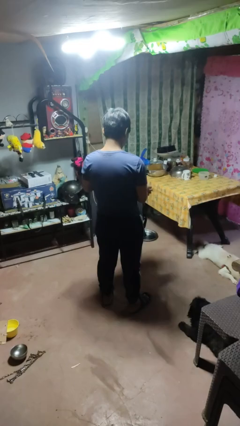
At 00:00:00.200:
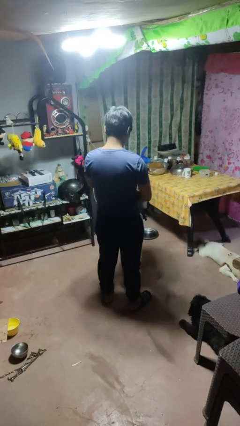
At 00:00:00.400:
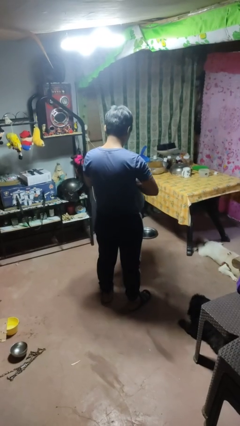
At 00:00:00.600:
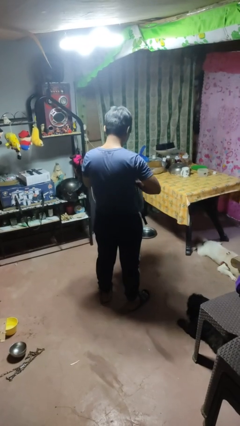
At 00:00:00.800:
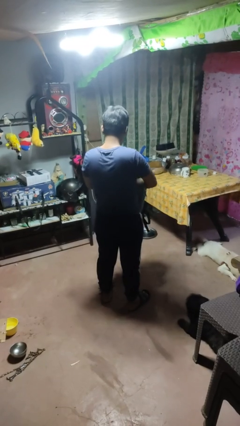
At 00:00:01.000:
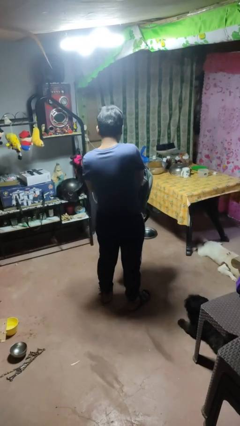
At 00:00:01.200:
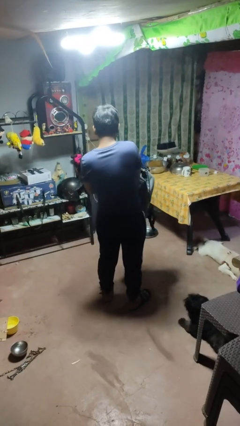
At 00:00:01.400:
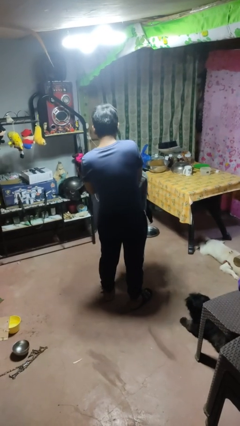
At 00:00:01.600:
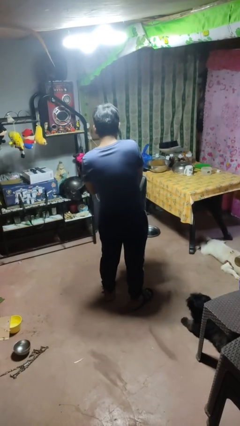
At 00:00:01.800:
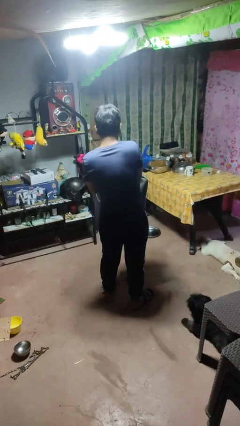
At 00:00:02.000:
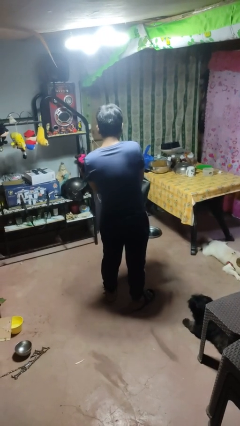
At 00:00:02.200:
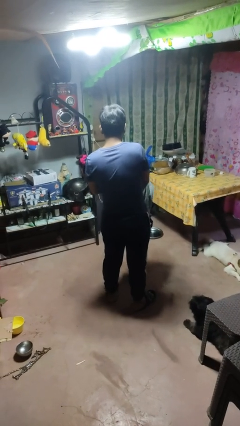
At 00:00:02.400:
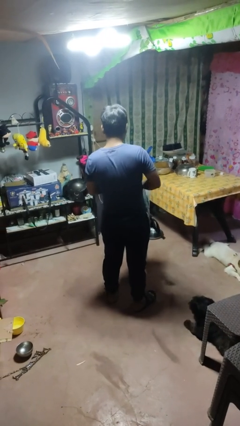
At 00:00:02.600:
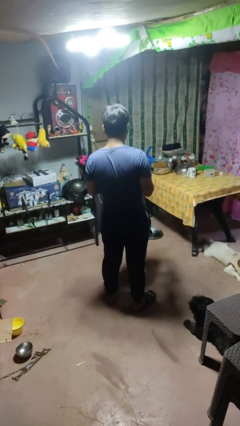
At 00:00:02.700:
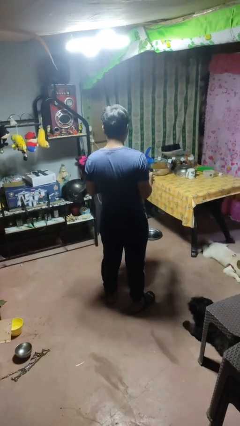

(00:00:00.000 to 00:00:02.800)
person searches in bag

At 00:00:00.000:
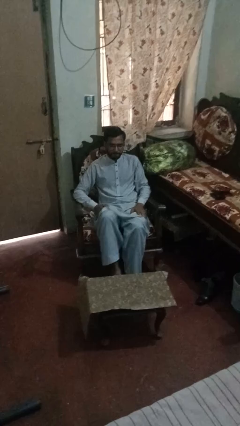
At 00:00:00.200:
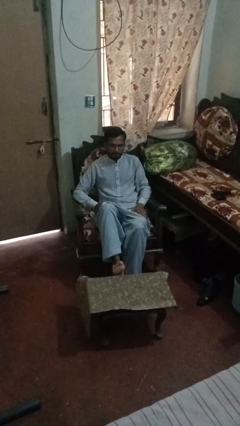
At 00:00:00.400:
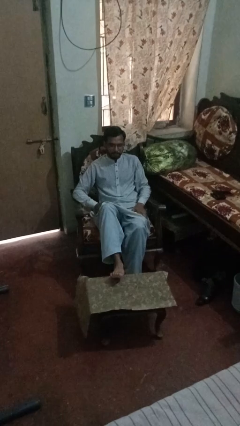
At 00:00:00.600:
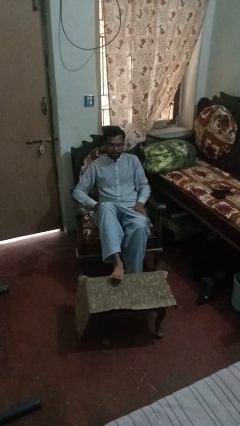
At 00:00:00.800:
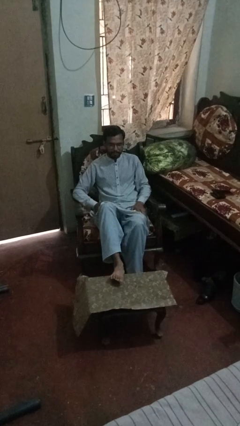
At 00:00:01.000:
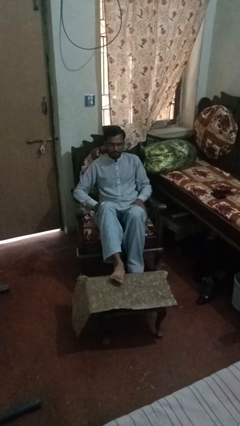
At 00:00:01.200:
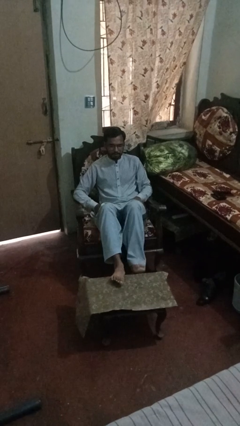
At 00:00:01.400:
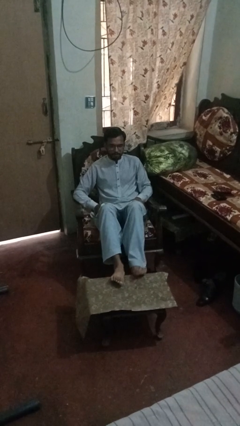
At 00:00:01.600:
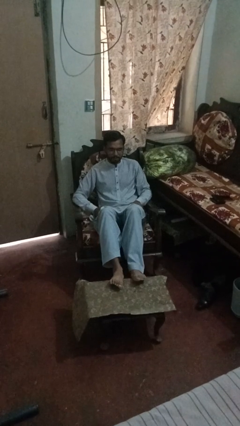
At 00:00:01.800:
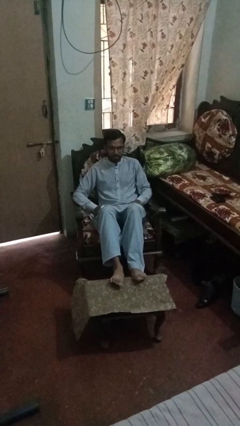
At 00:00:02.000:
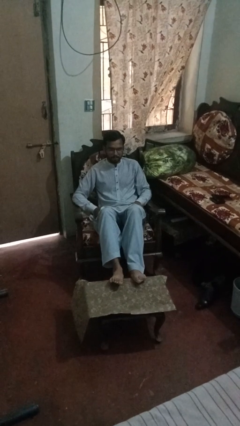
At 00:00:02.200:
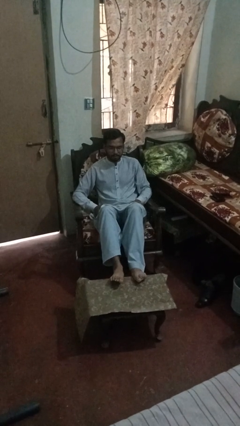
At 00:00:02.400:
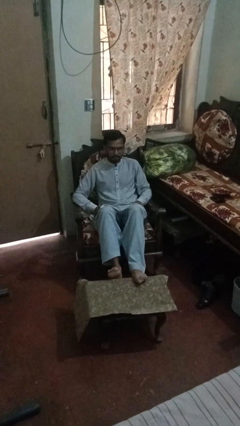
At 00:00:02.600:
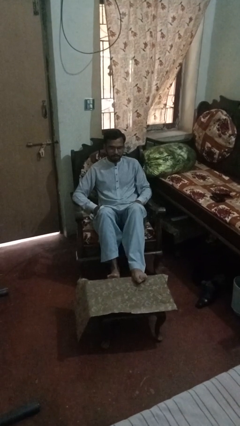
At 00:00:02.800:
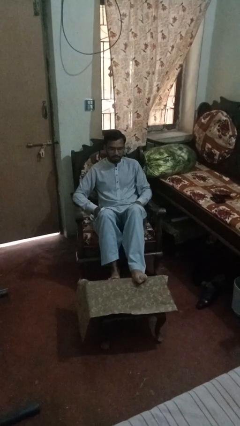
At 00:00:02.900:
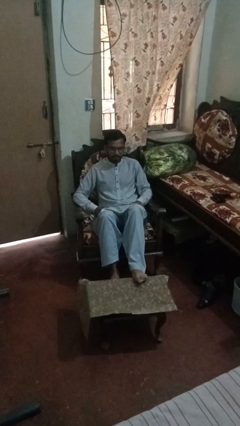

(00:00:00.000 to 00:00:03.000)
person puts feet up

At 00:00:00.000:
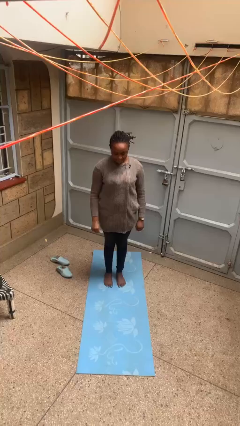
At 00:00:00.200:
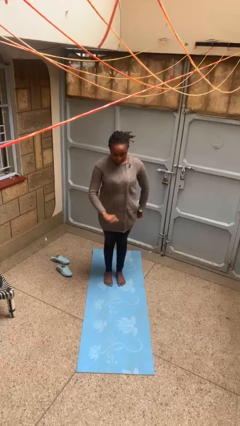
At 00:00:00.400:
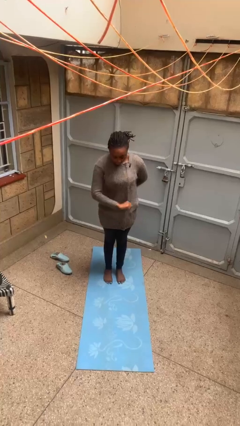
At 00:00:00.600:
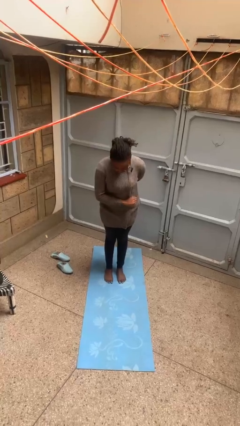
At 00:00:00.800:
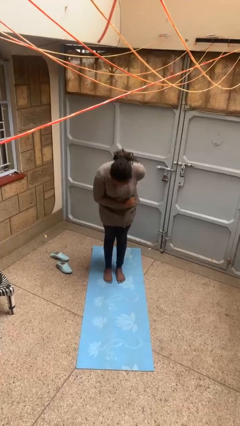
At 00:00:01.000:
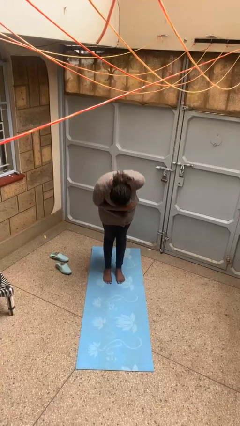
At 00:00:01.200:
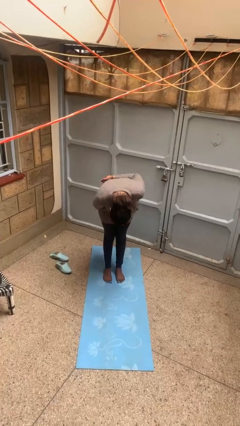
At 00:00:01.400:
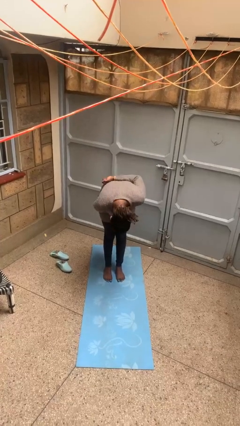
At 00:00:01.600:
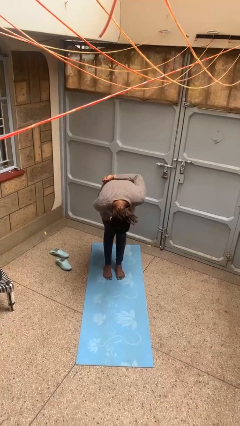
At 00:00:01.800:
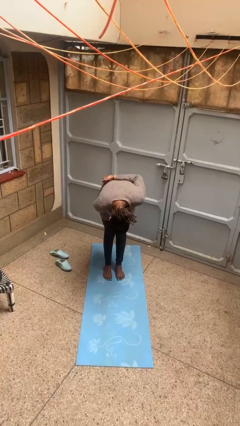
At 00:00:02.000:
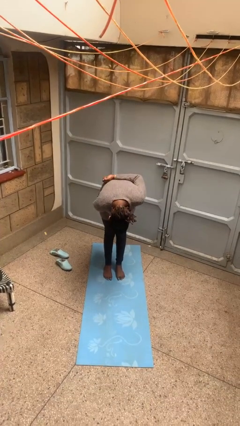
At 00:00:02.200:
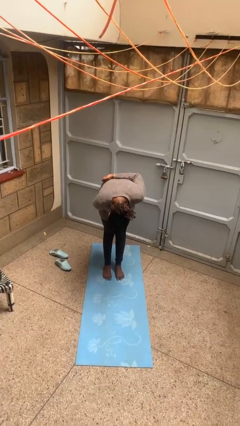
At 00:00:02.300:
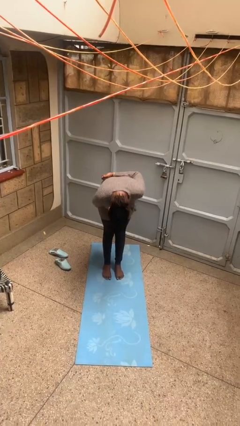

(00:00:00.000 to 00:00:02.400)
person bows

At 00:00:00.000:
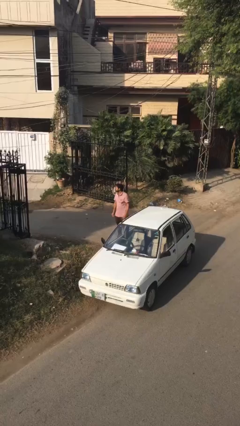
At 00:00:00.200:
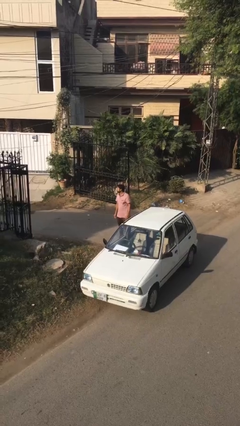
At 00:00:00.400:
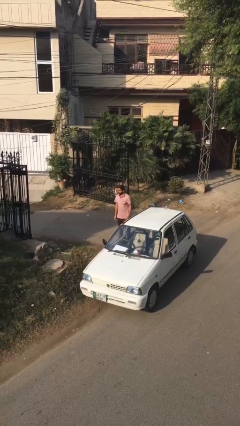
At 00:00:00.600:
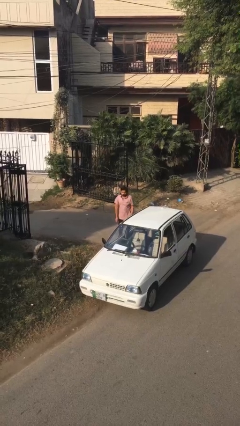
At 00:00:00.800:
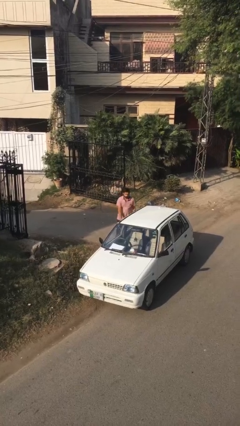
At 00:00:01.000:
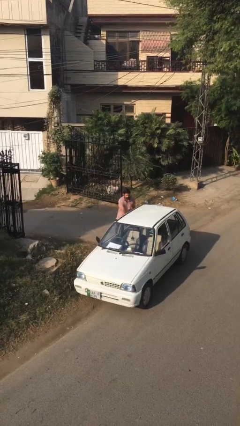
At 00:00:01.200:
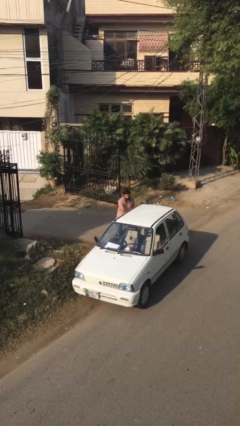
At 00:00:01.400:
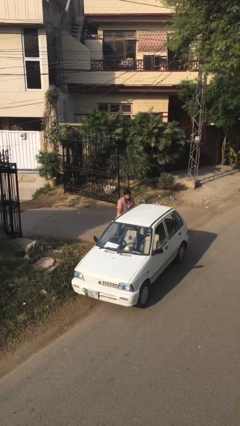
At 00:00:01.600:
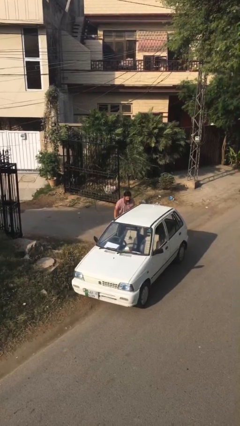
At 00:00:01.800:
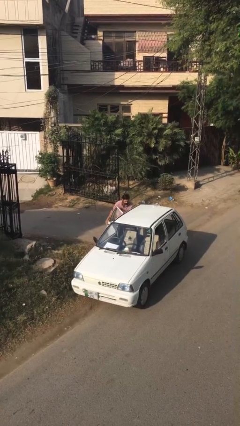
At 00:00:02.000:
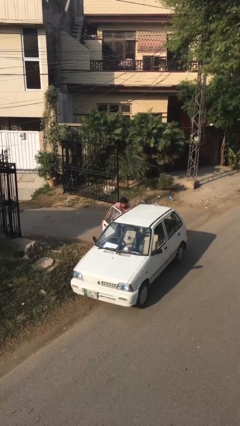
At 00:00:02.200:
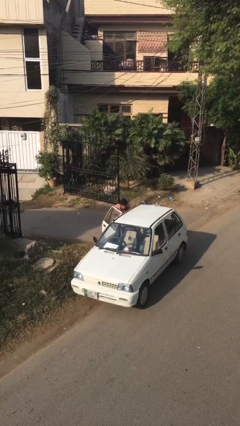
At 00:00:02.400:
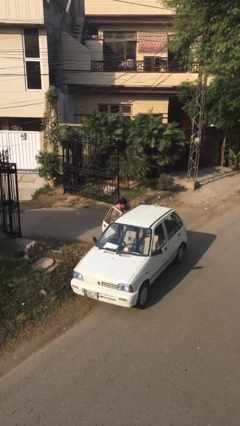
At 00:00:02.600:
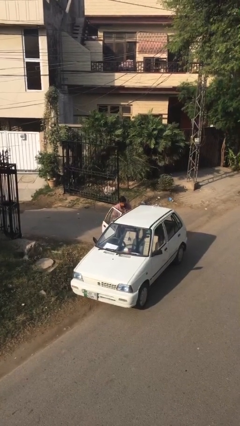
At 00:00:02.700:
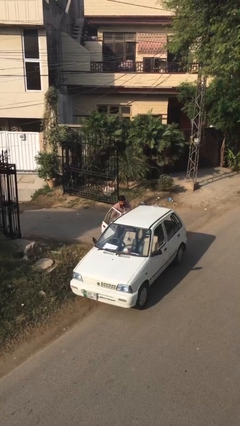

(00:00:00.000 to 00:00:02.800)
person unloads car

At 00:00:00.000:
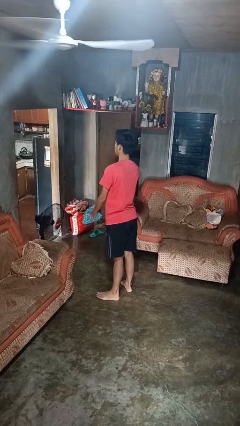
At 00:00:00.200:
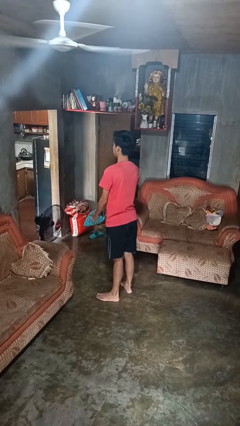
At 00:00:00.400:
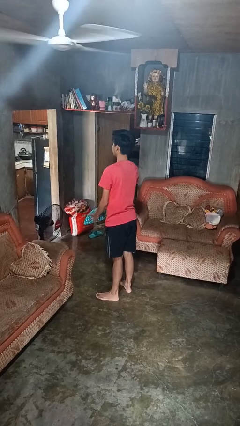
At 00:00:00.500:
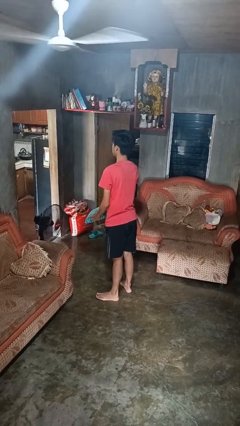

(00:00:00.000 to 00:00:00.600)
person catches dropped object

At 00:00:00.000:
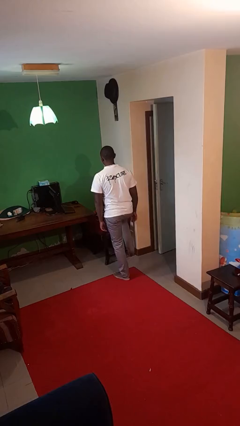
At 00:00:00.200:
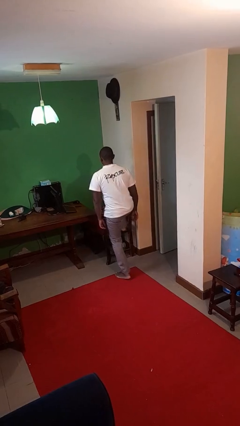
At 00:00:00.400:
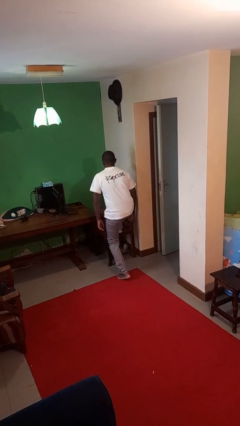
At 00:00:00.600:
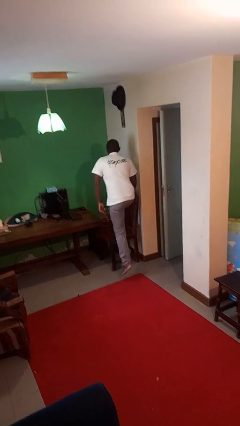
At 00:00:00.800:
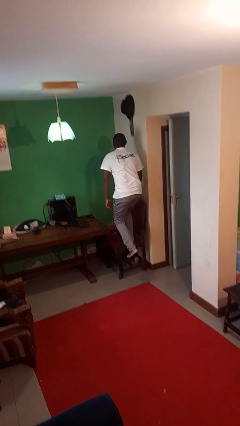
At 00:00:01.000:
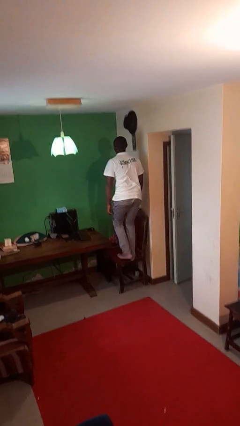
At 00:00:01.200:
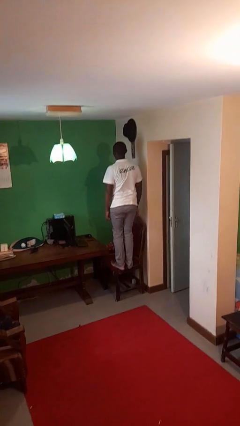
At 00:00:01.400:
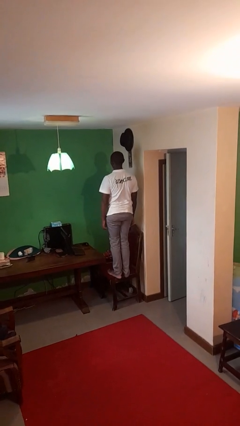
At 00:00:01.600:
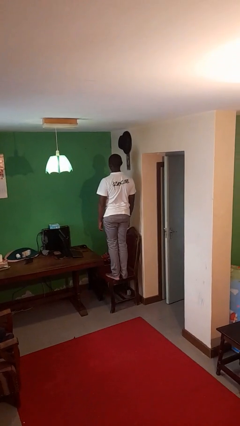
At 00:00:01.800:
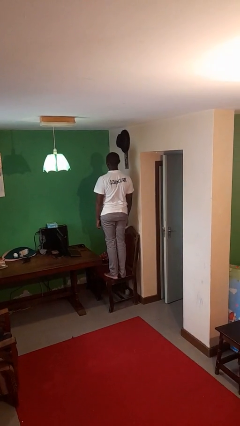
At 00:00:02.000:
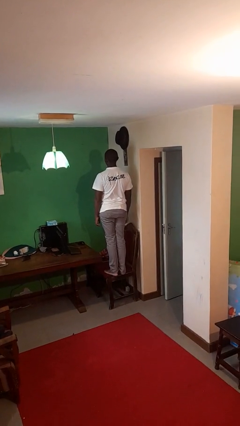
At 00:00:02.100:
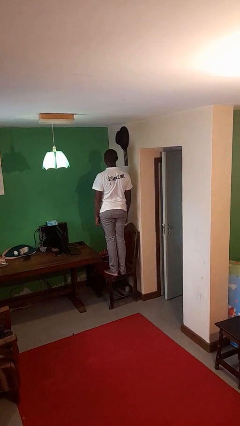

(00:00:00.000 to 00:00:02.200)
person climbs on chair

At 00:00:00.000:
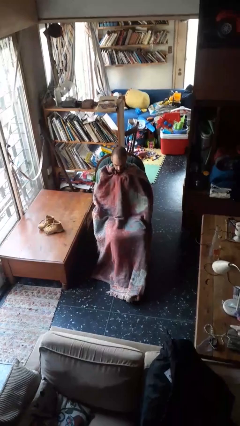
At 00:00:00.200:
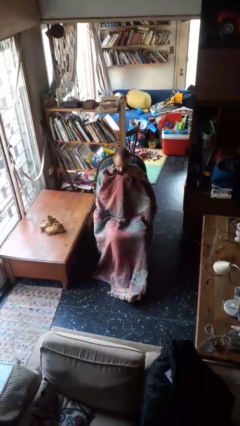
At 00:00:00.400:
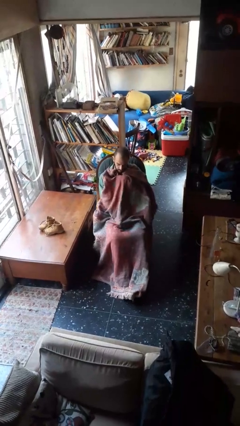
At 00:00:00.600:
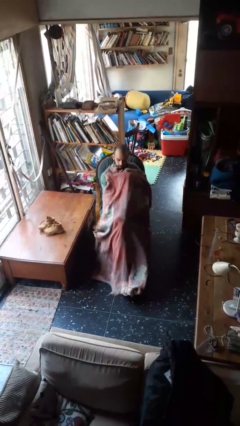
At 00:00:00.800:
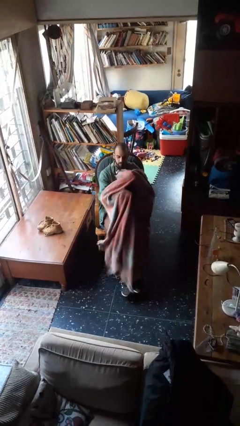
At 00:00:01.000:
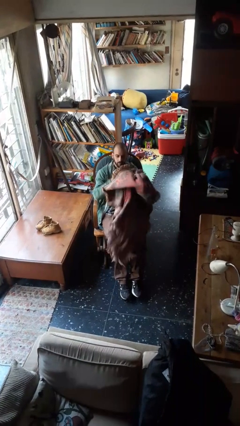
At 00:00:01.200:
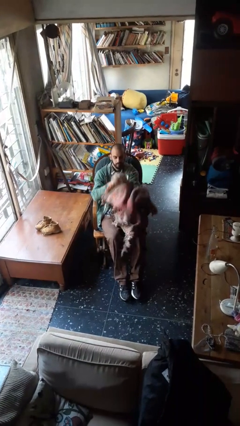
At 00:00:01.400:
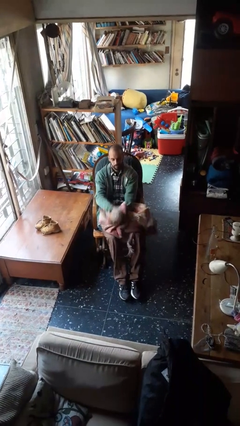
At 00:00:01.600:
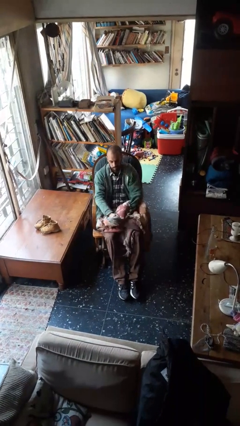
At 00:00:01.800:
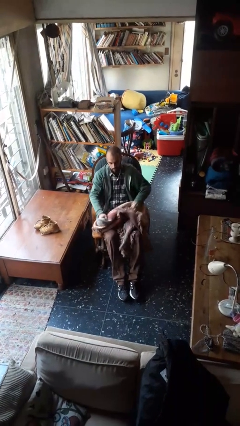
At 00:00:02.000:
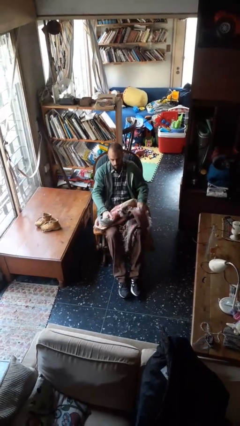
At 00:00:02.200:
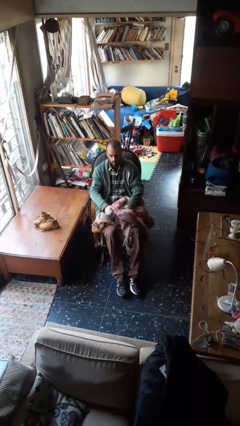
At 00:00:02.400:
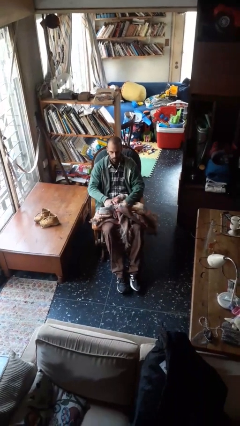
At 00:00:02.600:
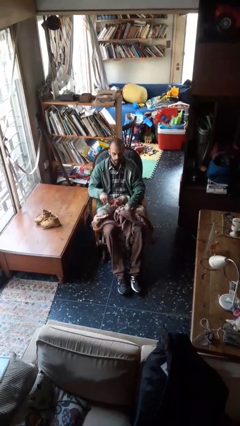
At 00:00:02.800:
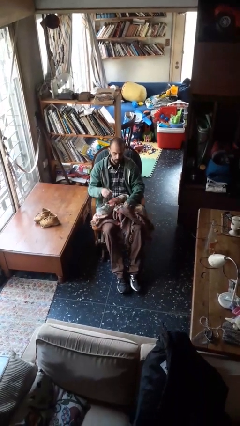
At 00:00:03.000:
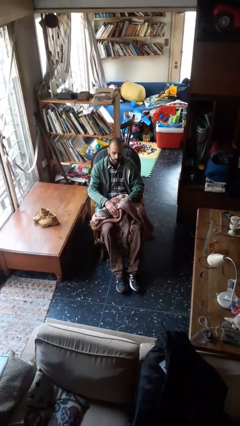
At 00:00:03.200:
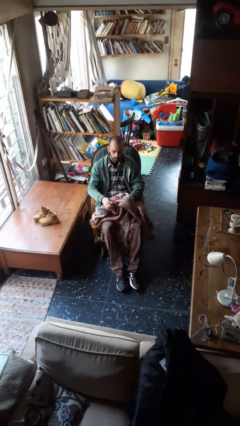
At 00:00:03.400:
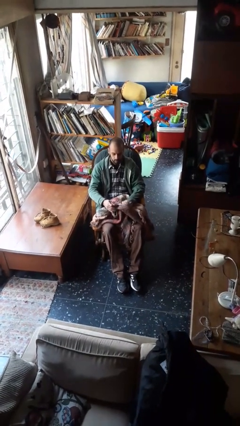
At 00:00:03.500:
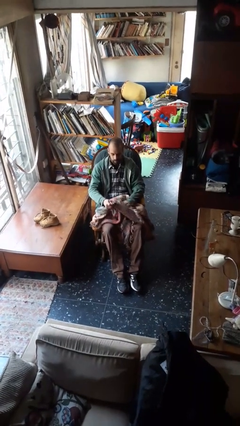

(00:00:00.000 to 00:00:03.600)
person uncovers with blanket
